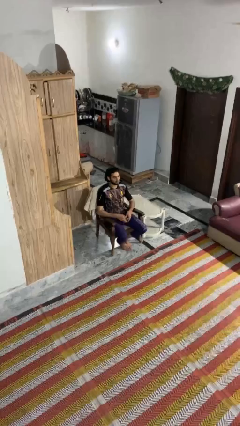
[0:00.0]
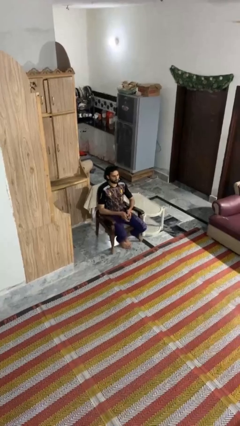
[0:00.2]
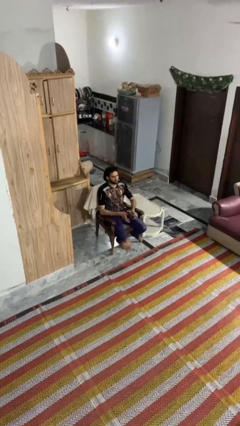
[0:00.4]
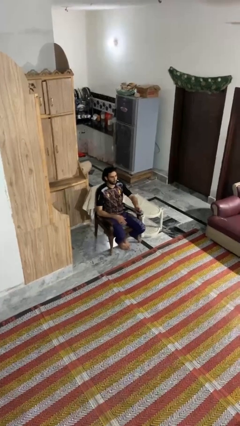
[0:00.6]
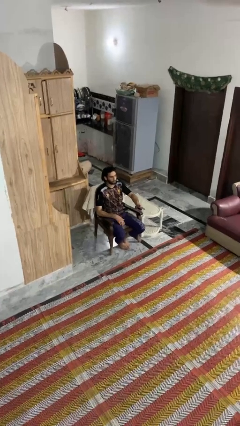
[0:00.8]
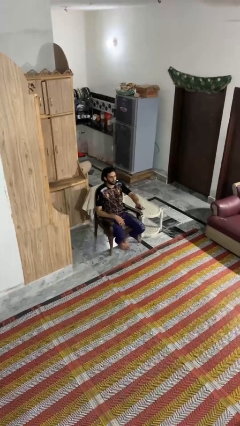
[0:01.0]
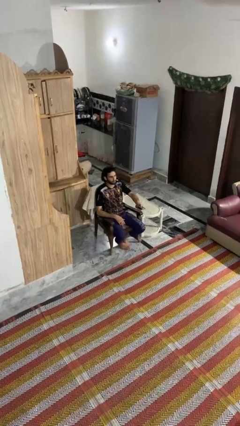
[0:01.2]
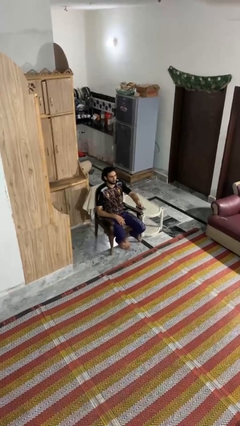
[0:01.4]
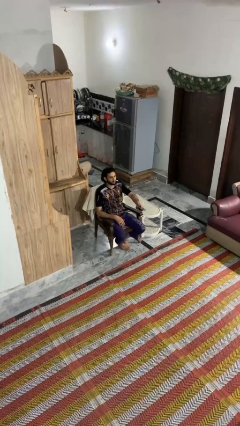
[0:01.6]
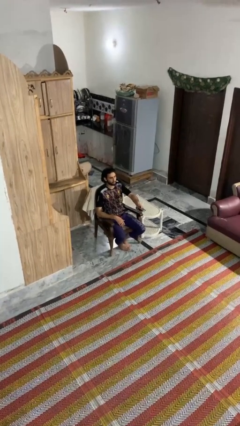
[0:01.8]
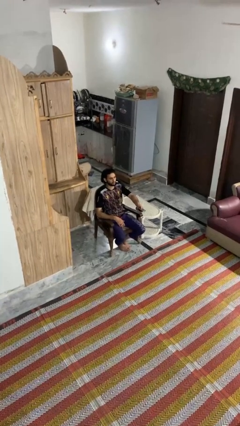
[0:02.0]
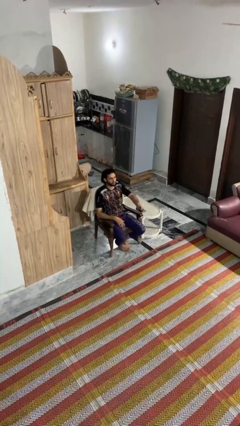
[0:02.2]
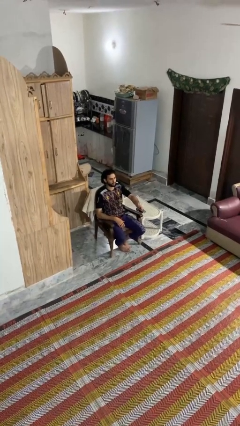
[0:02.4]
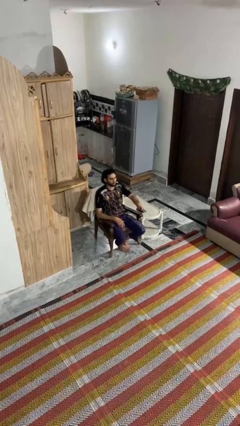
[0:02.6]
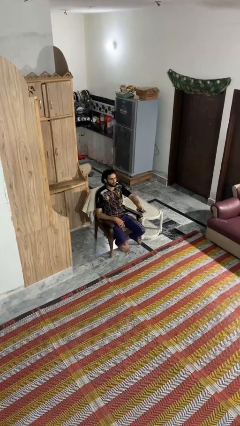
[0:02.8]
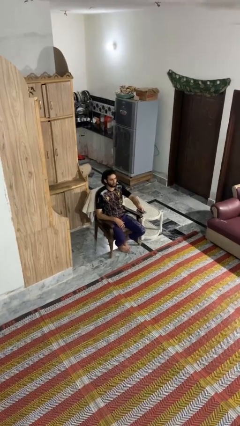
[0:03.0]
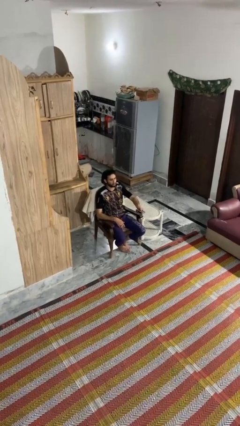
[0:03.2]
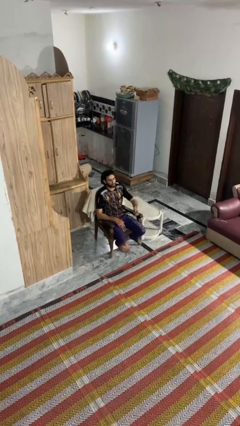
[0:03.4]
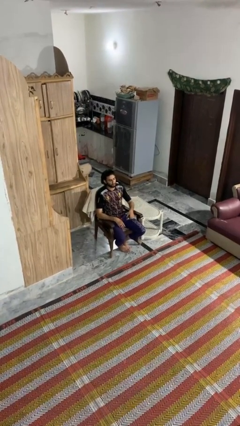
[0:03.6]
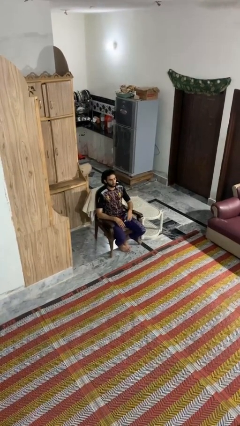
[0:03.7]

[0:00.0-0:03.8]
person uses television remote

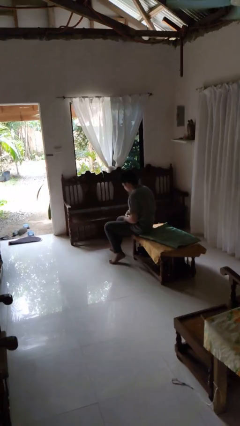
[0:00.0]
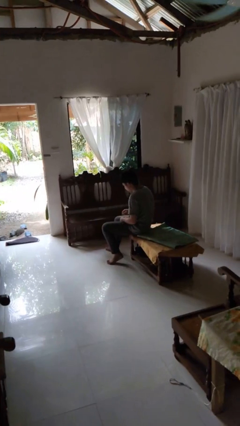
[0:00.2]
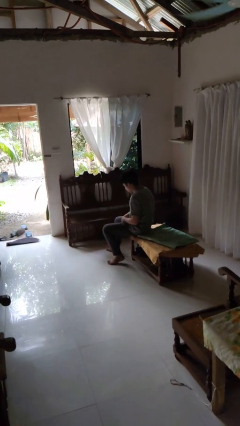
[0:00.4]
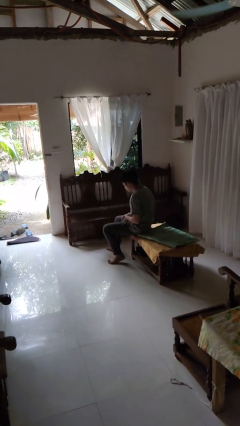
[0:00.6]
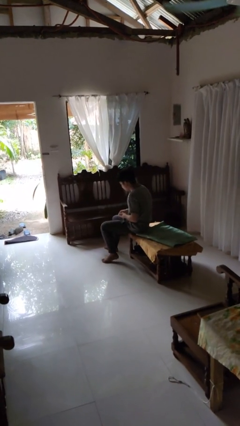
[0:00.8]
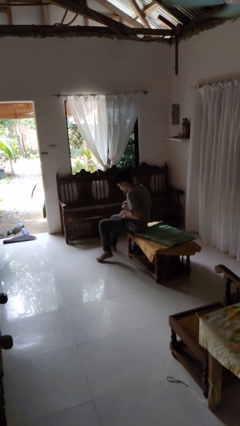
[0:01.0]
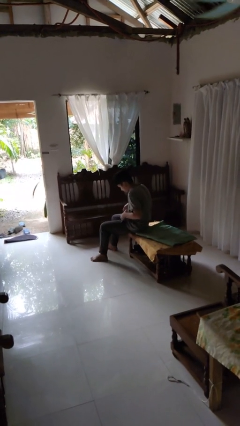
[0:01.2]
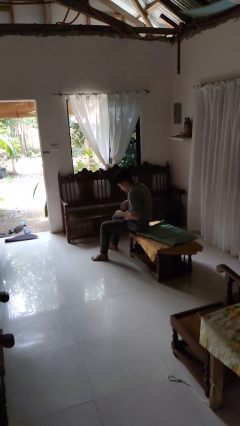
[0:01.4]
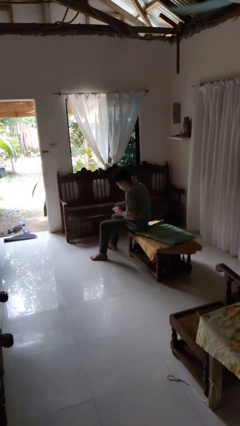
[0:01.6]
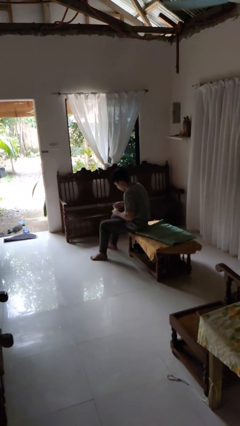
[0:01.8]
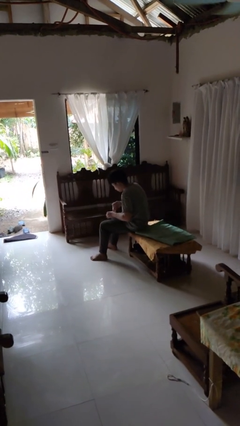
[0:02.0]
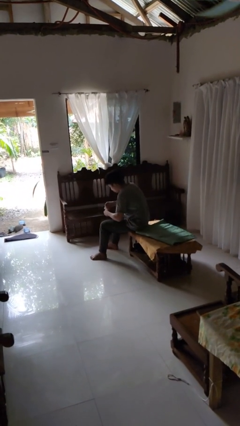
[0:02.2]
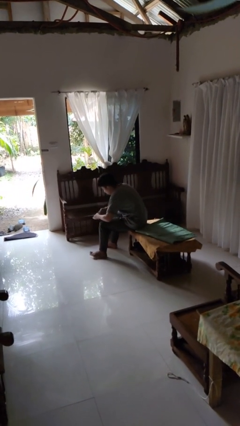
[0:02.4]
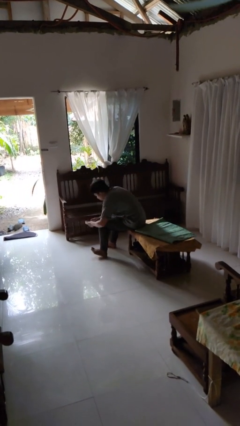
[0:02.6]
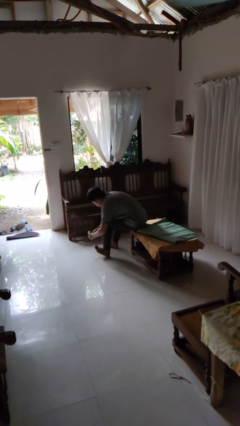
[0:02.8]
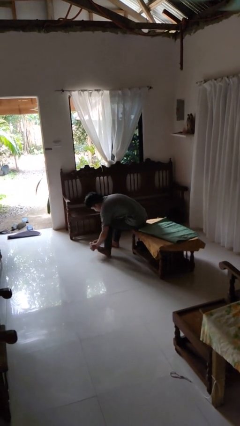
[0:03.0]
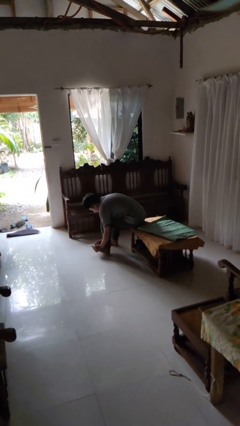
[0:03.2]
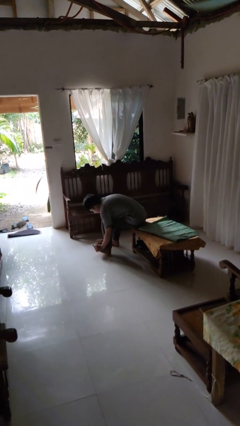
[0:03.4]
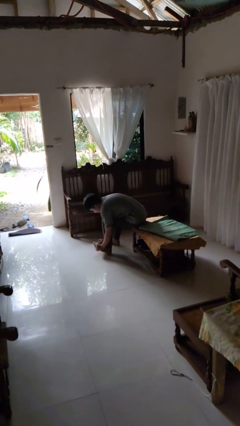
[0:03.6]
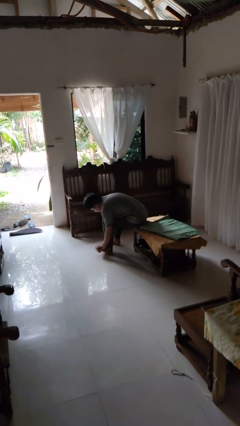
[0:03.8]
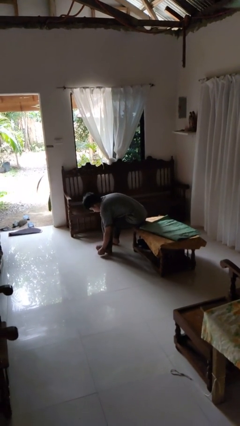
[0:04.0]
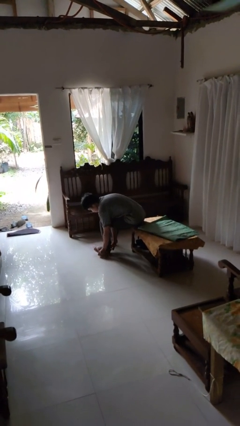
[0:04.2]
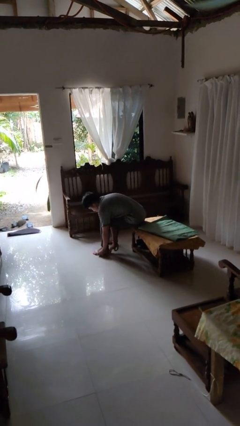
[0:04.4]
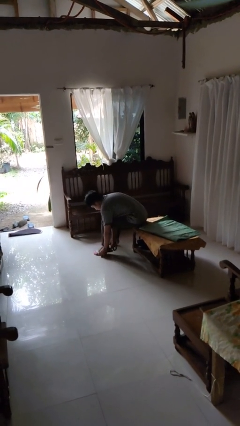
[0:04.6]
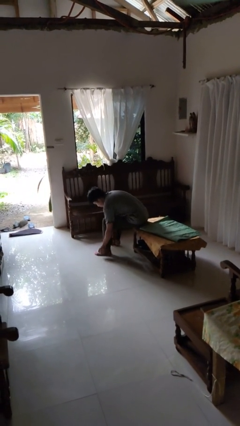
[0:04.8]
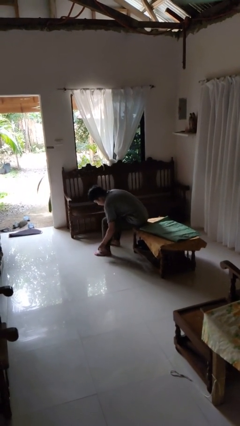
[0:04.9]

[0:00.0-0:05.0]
person puts on socks

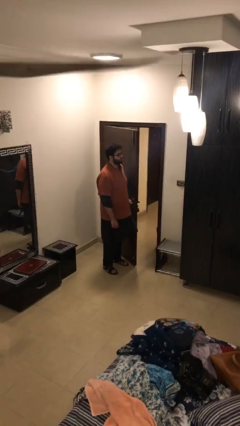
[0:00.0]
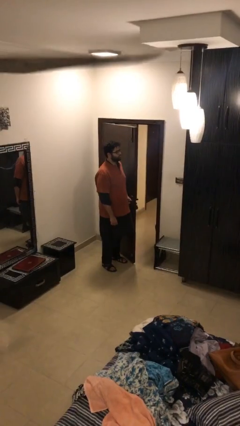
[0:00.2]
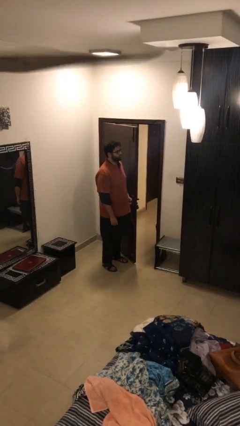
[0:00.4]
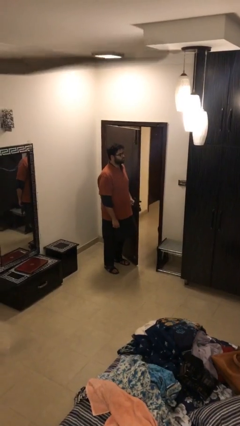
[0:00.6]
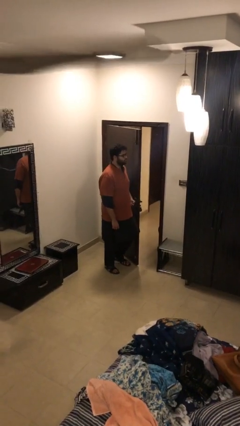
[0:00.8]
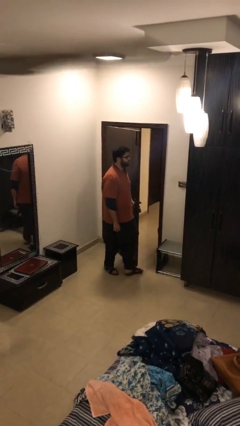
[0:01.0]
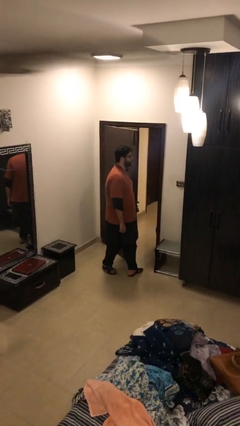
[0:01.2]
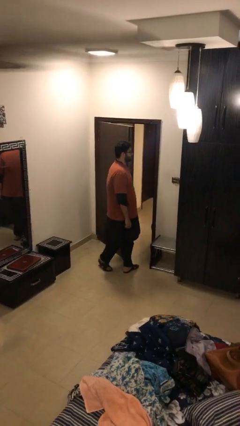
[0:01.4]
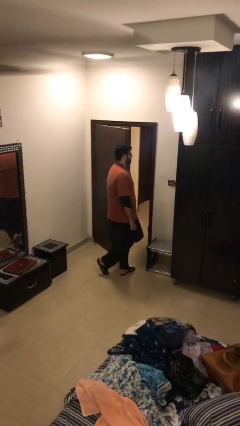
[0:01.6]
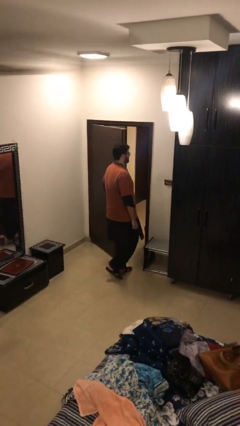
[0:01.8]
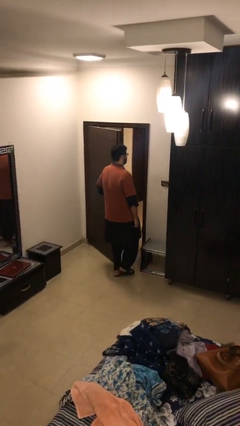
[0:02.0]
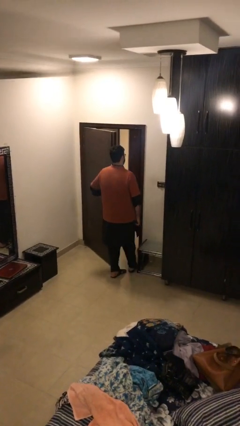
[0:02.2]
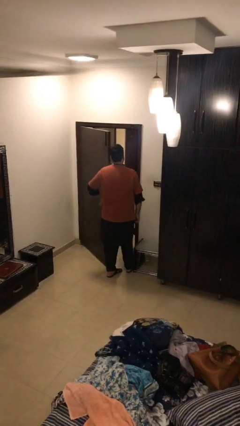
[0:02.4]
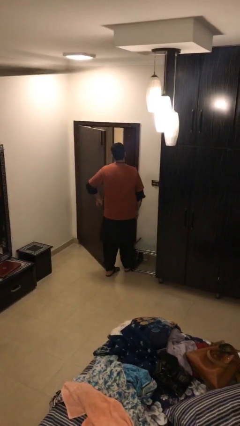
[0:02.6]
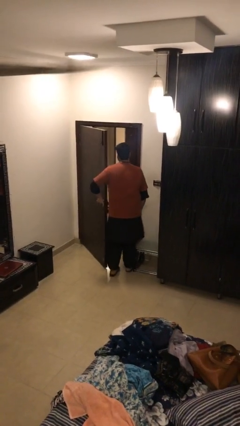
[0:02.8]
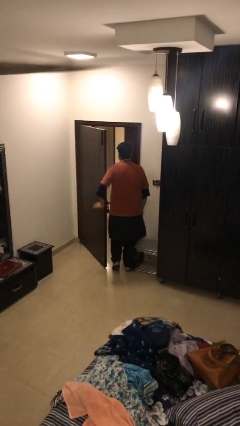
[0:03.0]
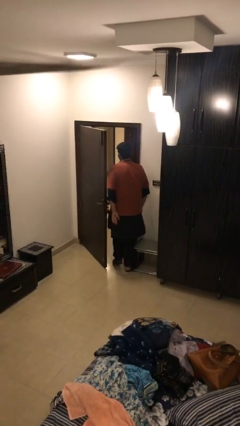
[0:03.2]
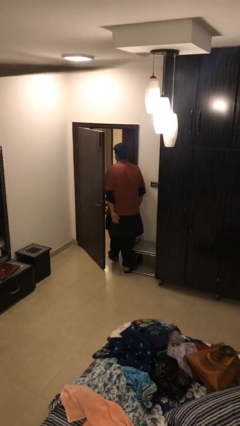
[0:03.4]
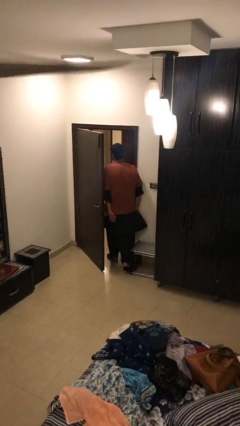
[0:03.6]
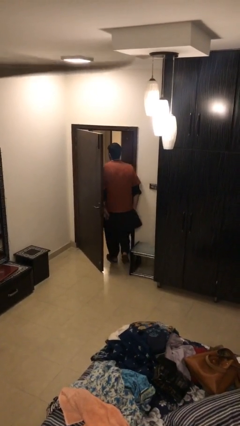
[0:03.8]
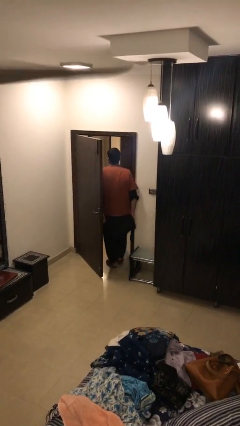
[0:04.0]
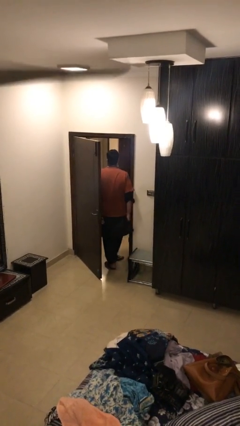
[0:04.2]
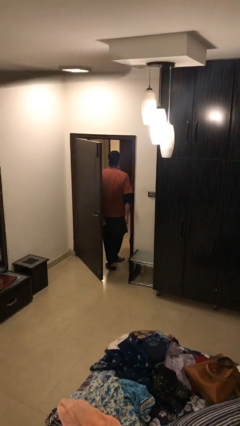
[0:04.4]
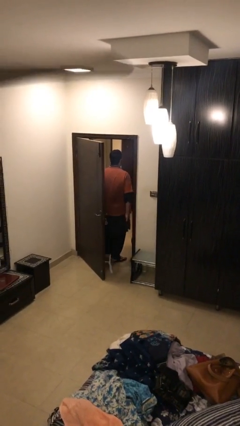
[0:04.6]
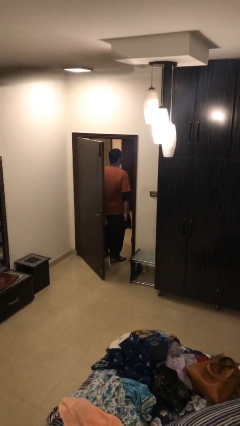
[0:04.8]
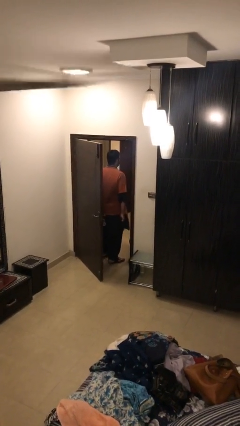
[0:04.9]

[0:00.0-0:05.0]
person exits scene through structure

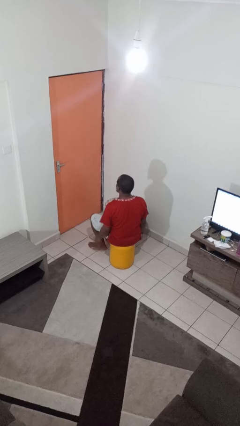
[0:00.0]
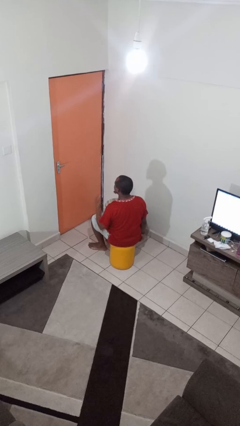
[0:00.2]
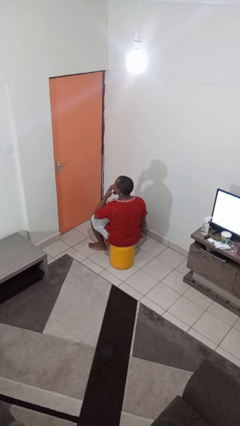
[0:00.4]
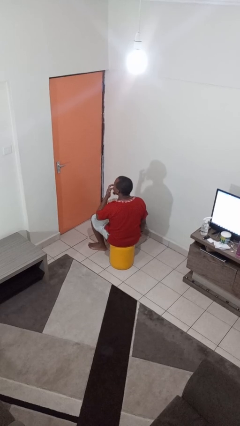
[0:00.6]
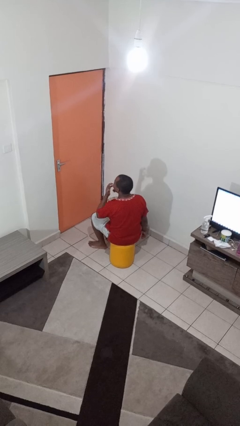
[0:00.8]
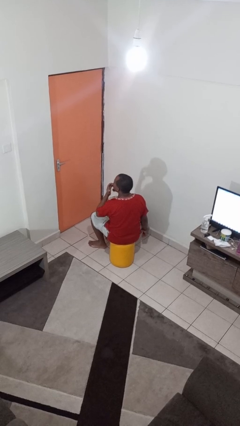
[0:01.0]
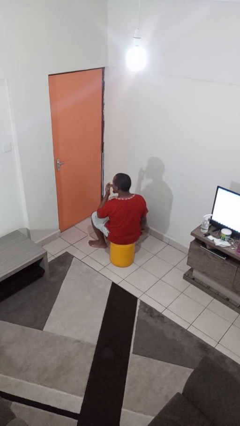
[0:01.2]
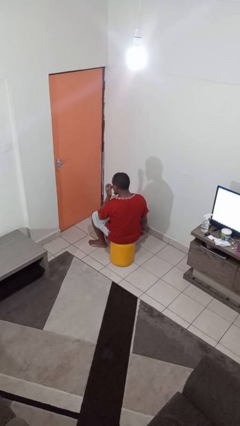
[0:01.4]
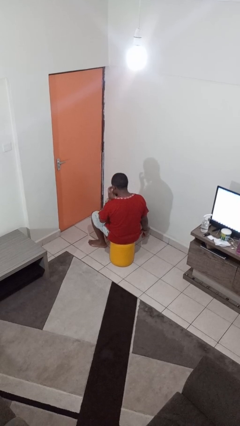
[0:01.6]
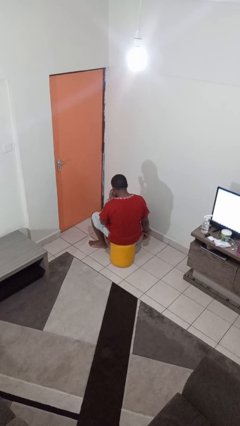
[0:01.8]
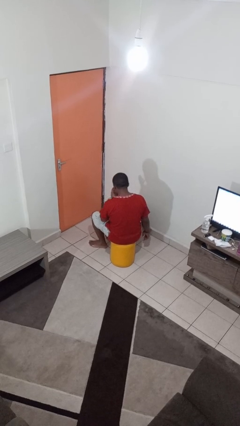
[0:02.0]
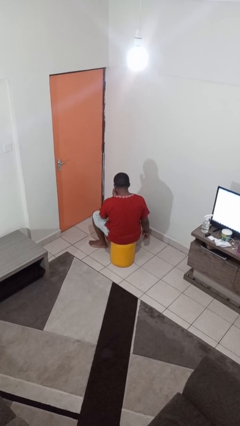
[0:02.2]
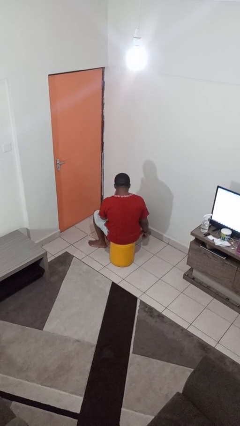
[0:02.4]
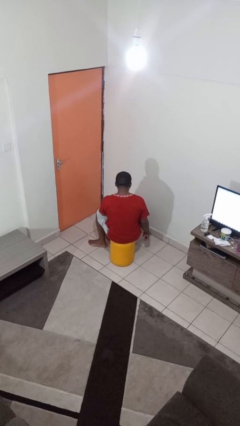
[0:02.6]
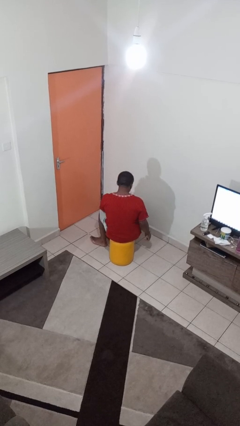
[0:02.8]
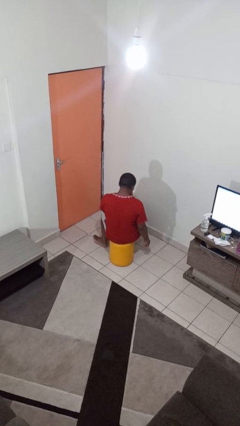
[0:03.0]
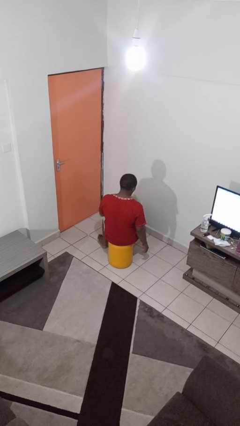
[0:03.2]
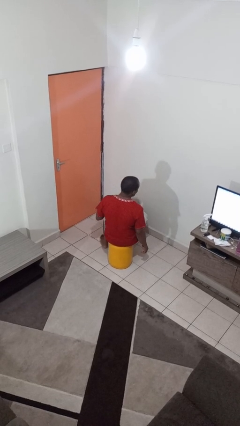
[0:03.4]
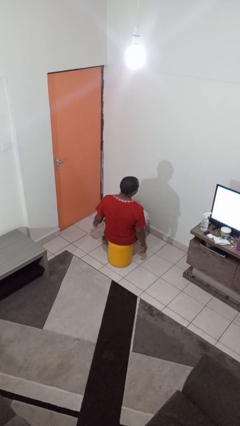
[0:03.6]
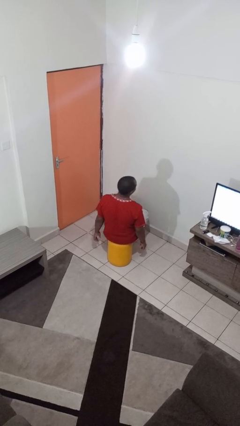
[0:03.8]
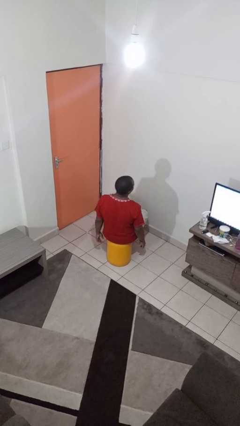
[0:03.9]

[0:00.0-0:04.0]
person licks fingers
